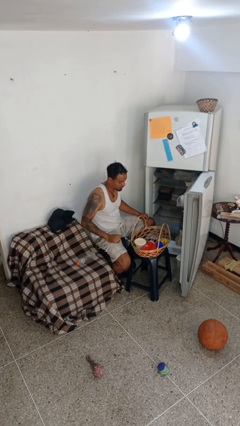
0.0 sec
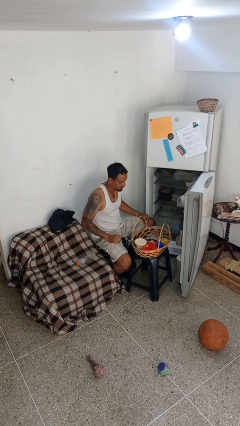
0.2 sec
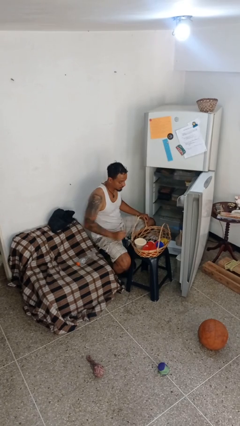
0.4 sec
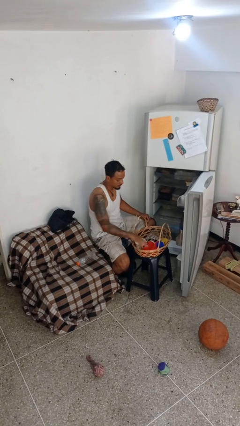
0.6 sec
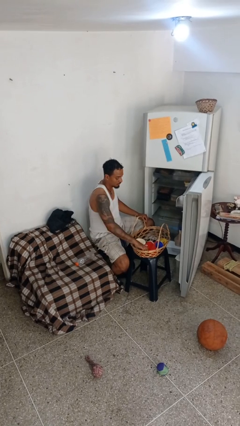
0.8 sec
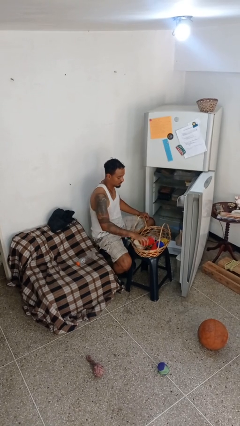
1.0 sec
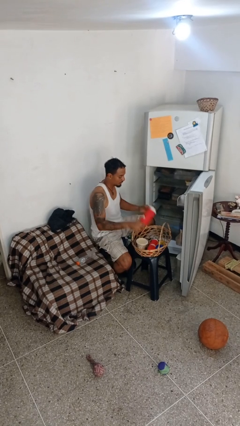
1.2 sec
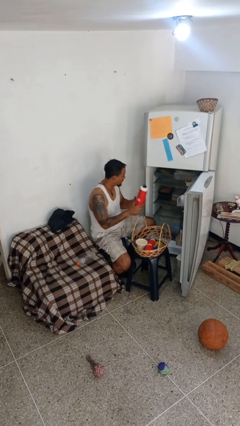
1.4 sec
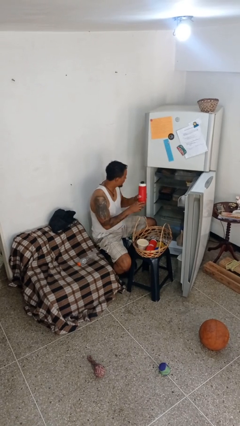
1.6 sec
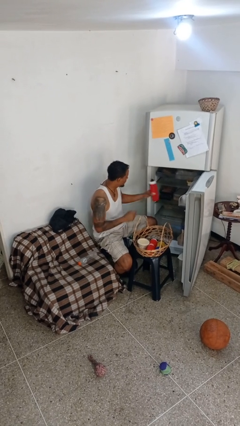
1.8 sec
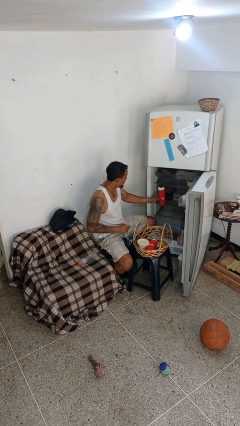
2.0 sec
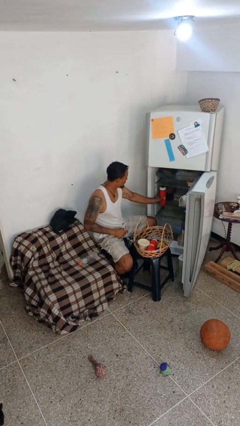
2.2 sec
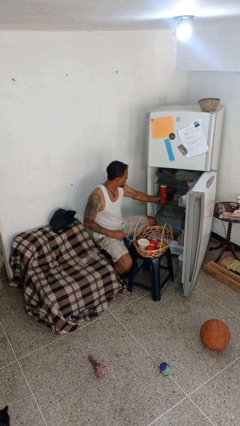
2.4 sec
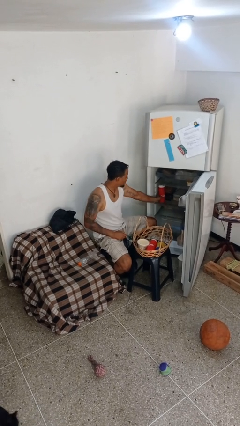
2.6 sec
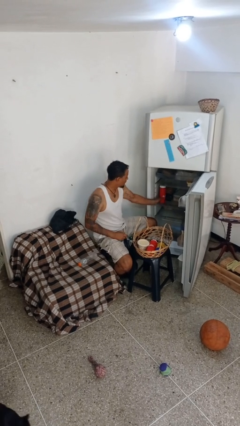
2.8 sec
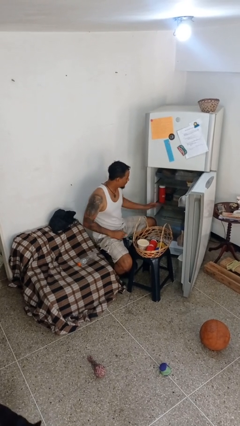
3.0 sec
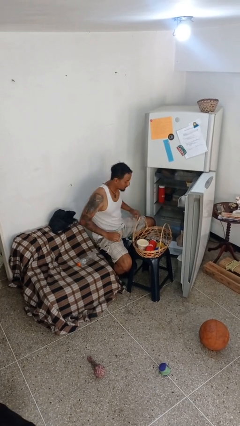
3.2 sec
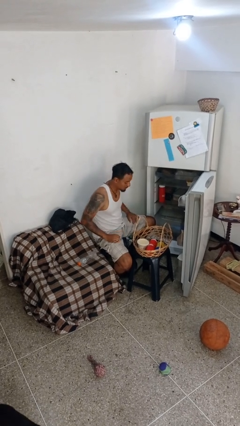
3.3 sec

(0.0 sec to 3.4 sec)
person loads groceries into refrigerator

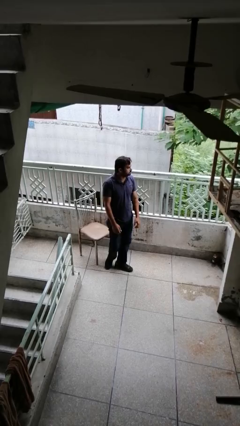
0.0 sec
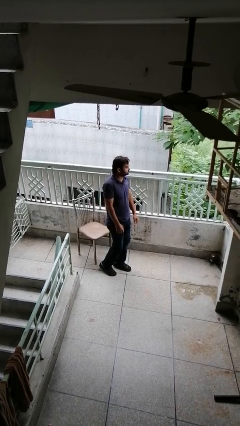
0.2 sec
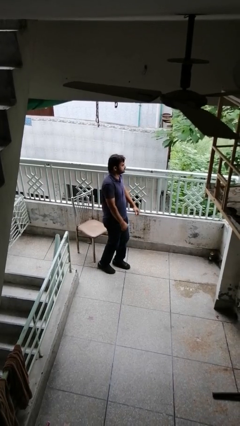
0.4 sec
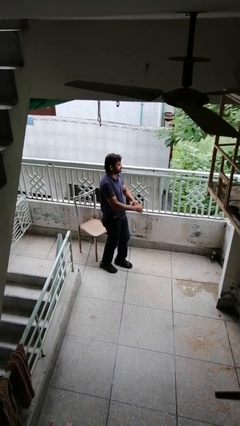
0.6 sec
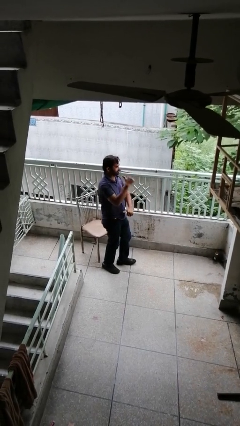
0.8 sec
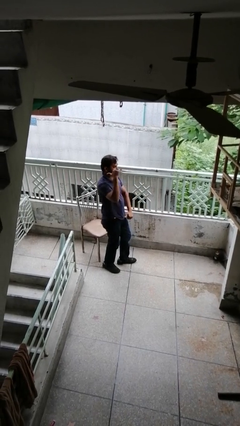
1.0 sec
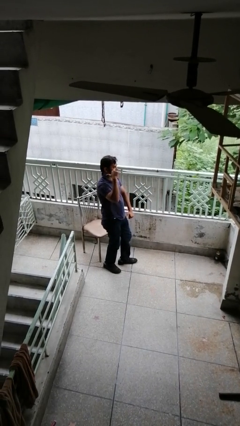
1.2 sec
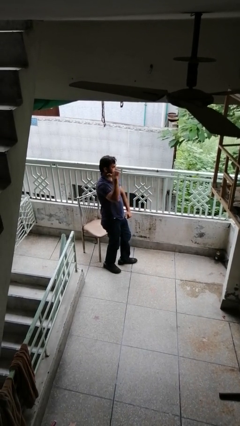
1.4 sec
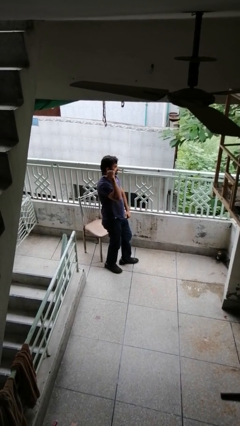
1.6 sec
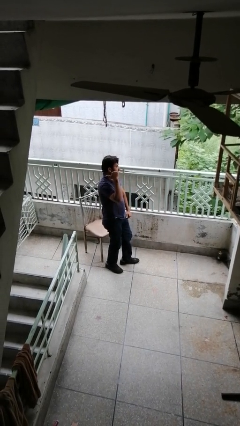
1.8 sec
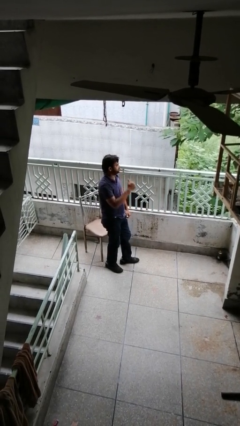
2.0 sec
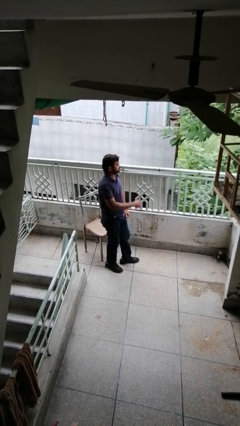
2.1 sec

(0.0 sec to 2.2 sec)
person gestures behind me

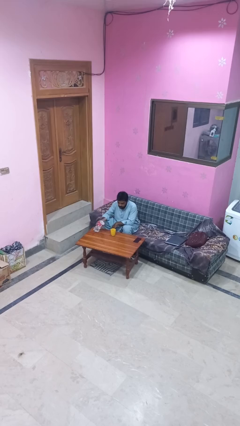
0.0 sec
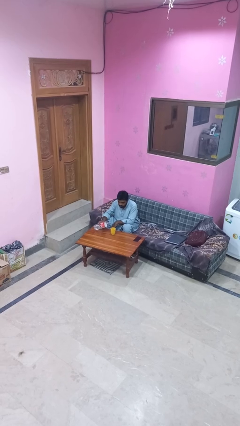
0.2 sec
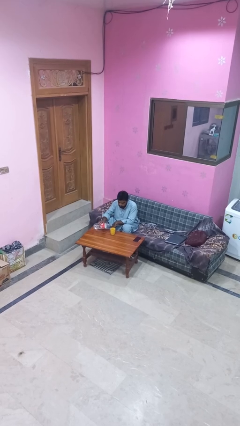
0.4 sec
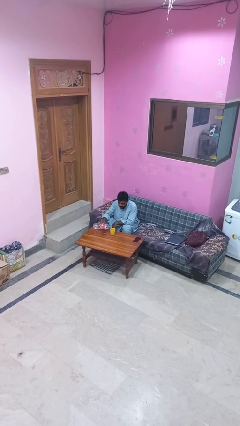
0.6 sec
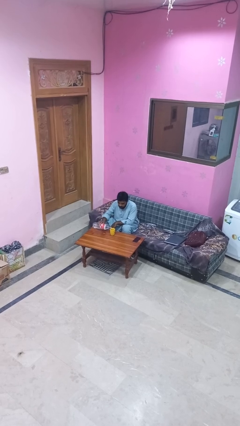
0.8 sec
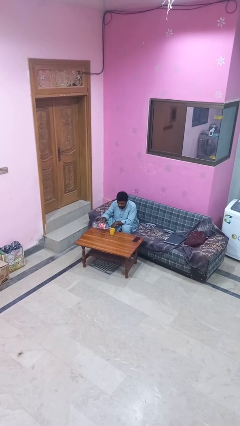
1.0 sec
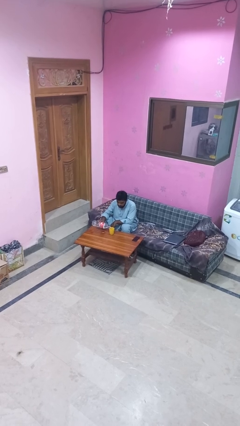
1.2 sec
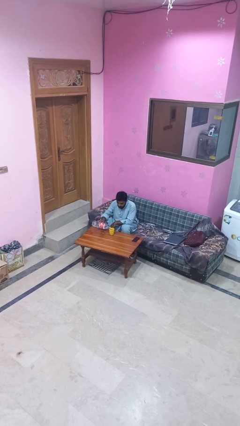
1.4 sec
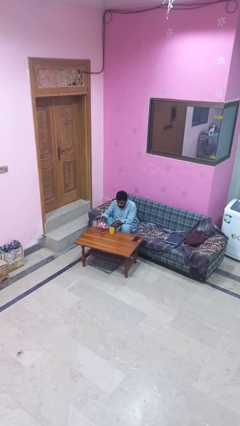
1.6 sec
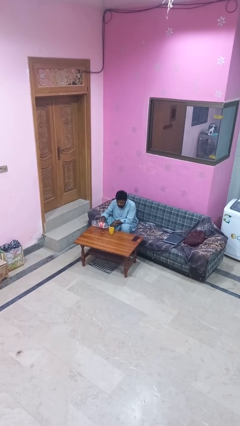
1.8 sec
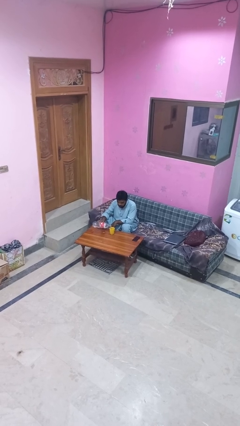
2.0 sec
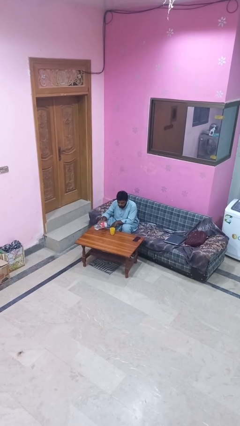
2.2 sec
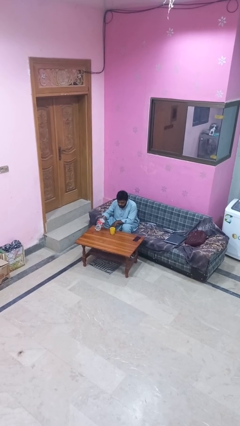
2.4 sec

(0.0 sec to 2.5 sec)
person pours liquid into cup

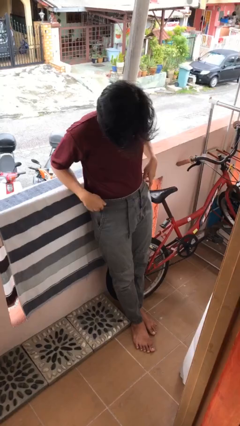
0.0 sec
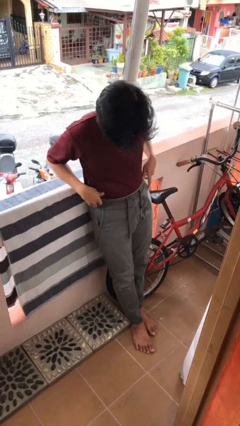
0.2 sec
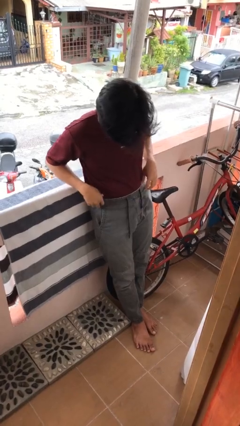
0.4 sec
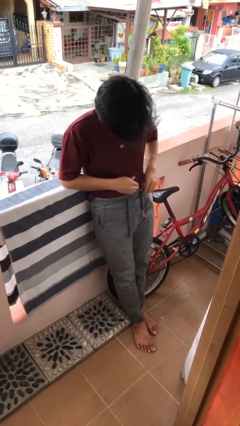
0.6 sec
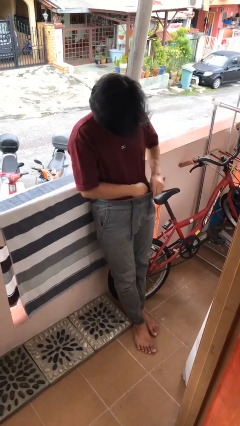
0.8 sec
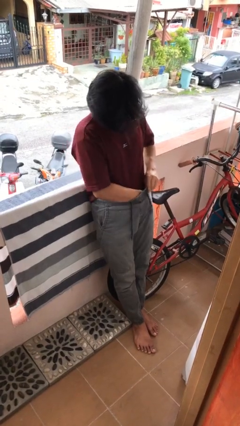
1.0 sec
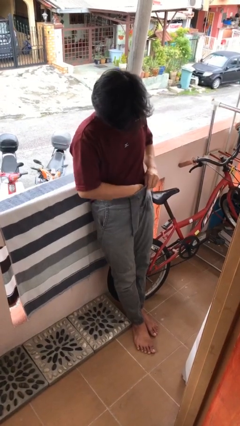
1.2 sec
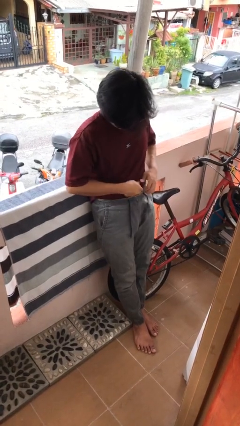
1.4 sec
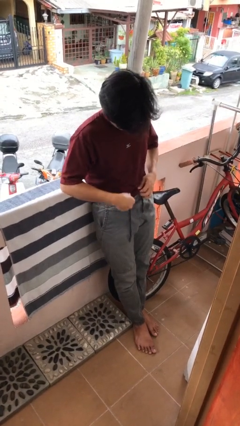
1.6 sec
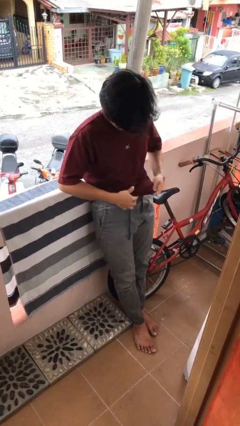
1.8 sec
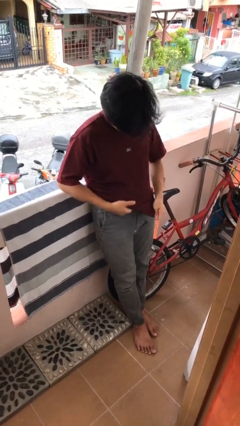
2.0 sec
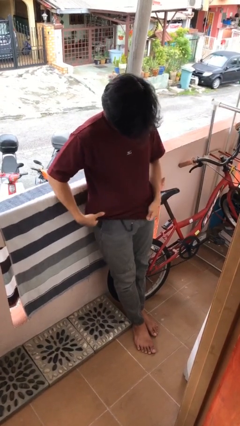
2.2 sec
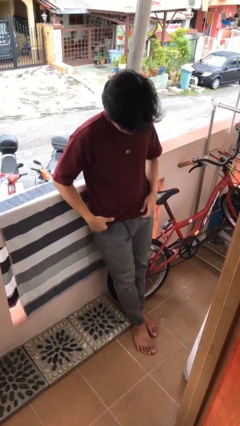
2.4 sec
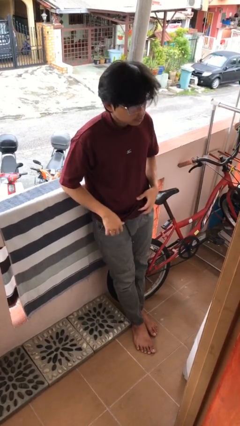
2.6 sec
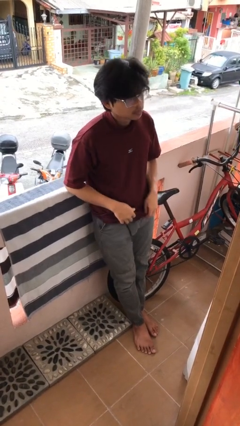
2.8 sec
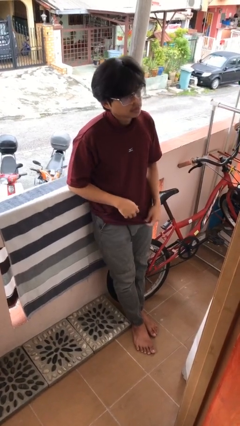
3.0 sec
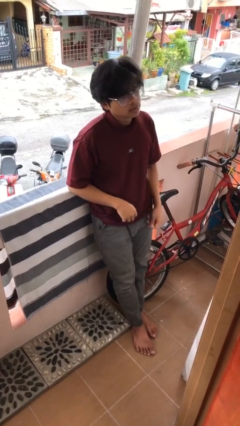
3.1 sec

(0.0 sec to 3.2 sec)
person untucks shirt

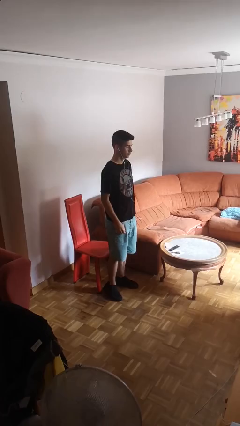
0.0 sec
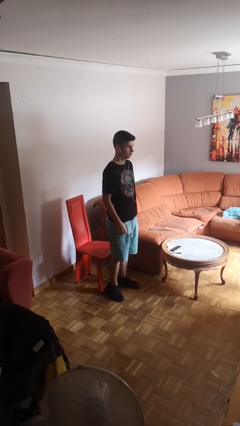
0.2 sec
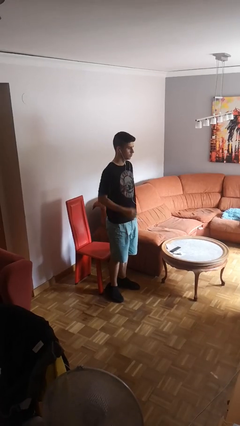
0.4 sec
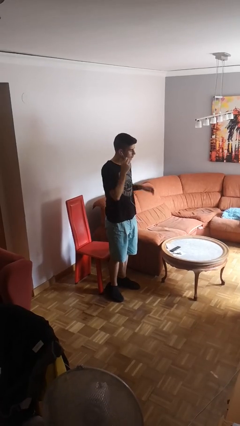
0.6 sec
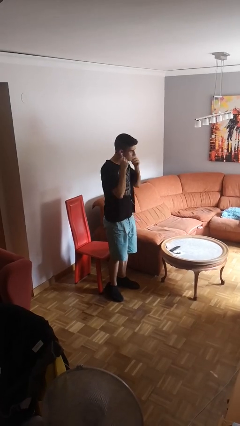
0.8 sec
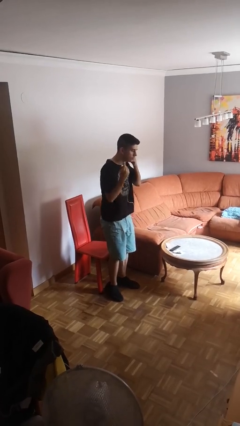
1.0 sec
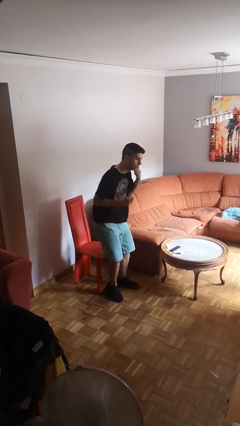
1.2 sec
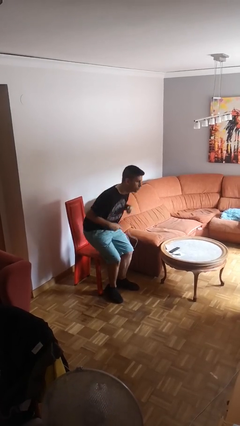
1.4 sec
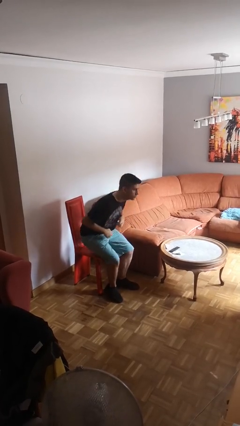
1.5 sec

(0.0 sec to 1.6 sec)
person takes off headphones

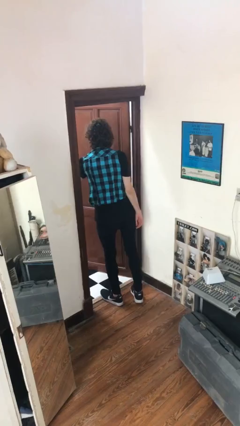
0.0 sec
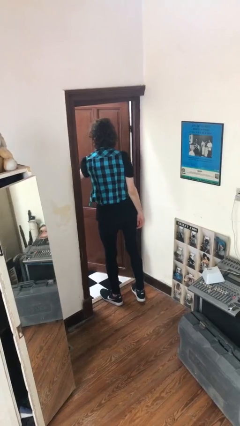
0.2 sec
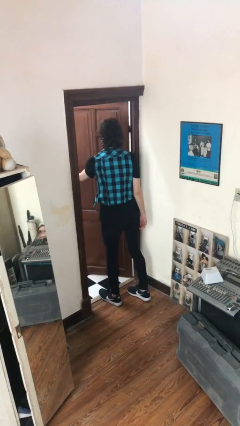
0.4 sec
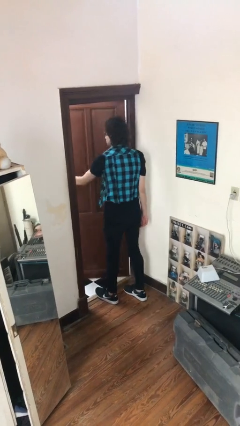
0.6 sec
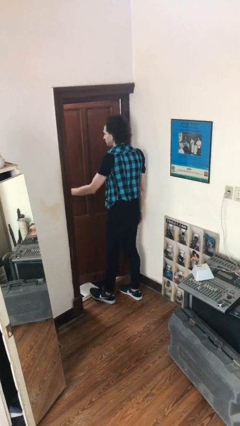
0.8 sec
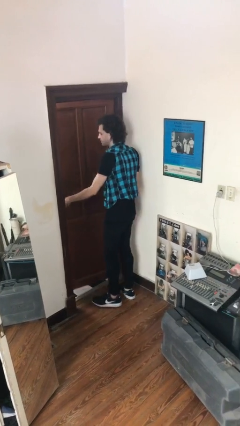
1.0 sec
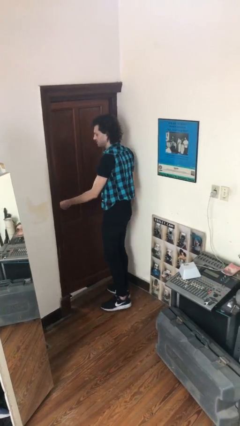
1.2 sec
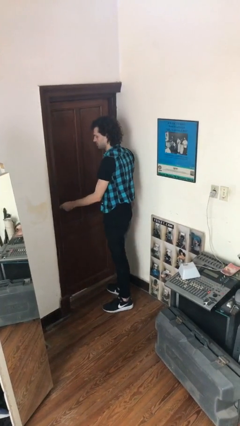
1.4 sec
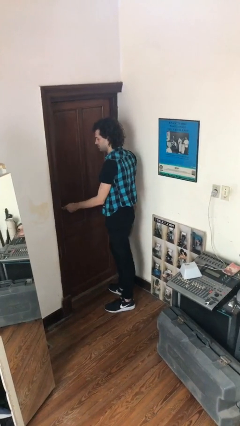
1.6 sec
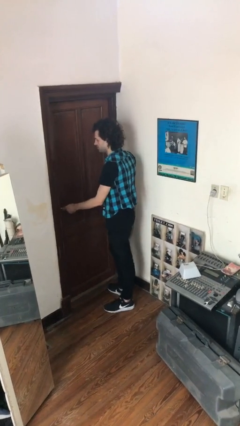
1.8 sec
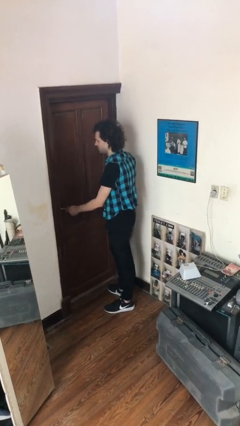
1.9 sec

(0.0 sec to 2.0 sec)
person closes facility door

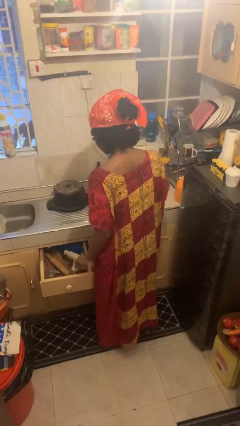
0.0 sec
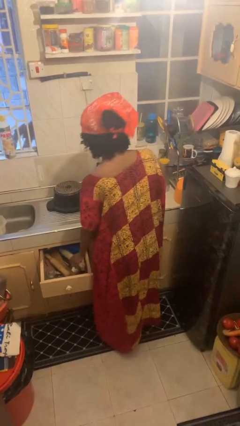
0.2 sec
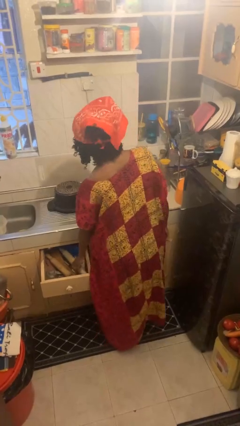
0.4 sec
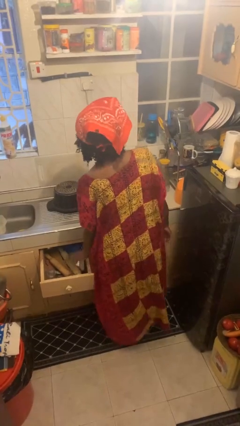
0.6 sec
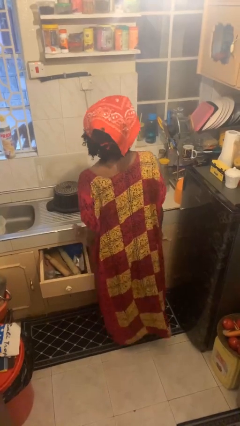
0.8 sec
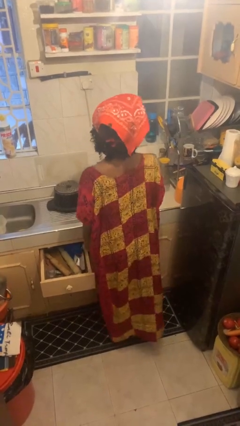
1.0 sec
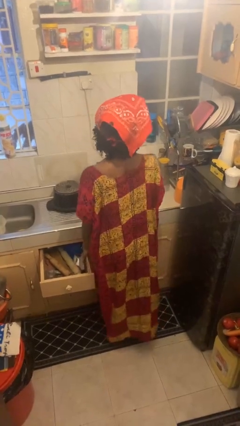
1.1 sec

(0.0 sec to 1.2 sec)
person puts object into kitchen drawer

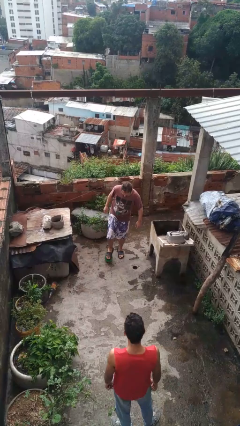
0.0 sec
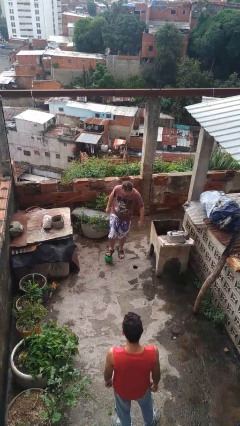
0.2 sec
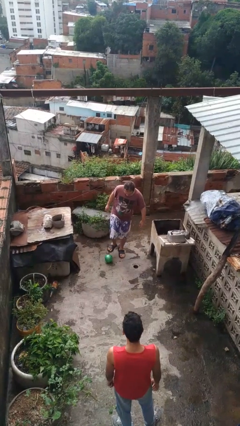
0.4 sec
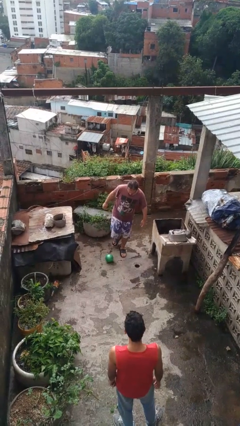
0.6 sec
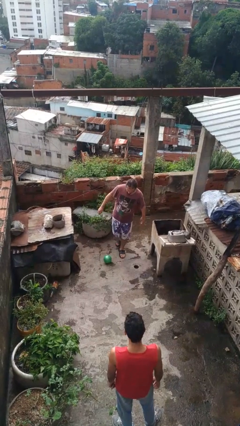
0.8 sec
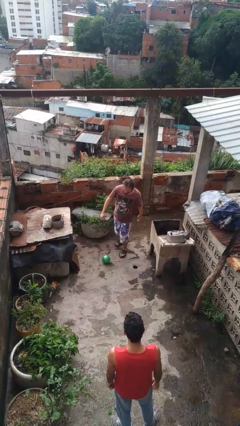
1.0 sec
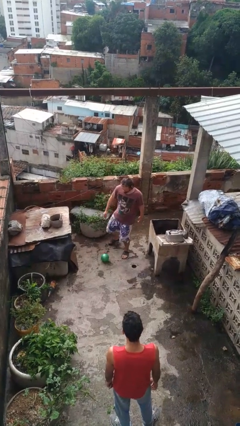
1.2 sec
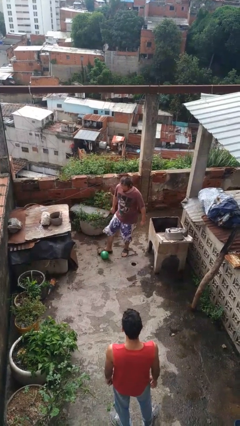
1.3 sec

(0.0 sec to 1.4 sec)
person kicks object to person
